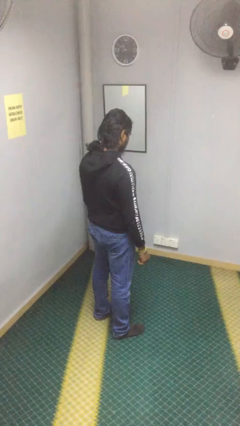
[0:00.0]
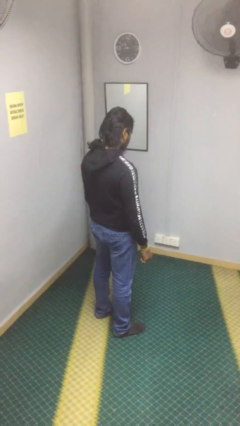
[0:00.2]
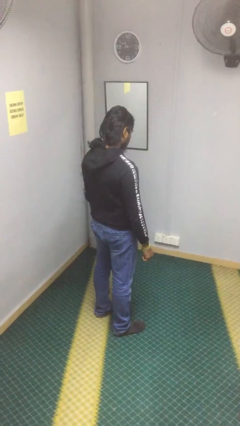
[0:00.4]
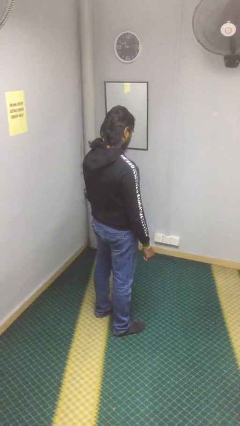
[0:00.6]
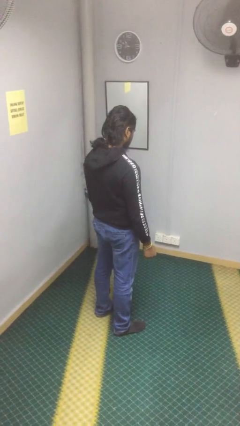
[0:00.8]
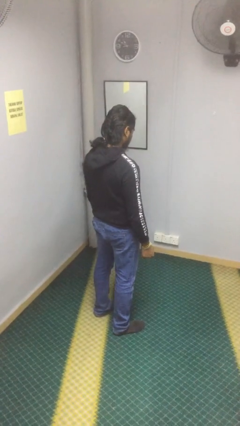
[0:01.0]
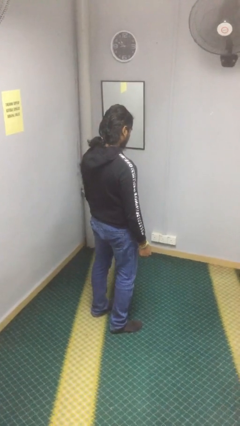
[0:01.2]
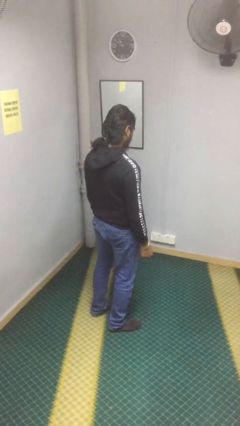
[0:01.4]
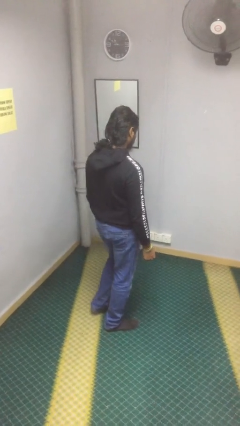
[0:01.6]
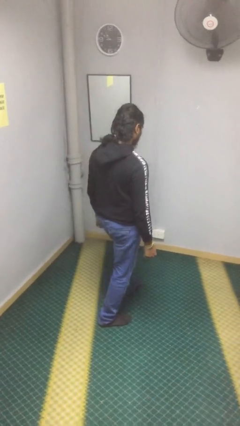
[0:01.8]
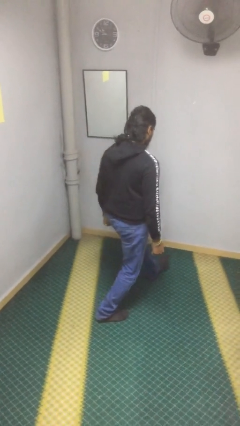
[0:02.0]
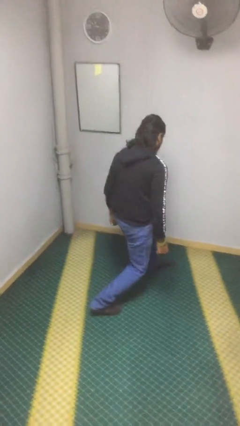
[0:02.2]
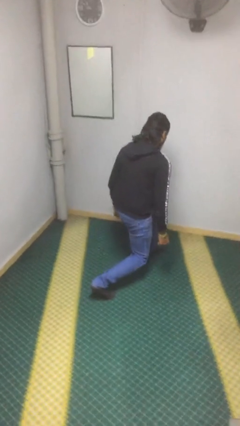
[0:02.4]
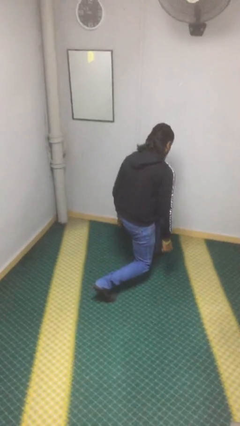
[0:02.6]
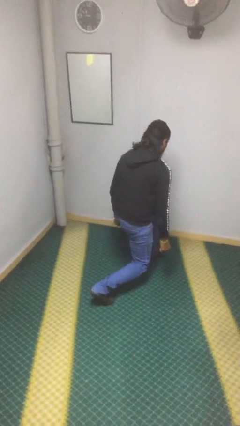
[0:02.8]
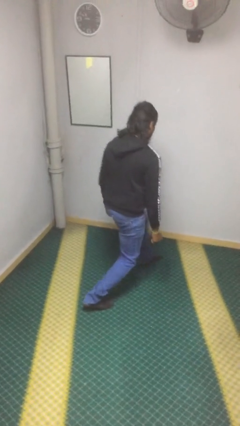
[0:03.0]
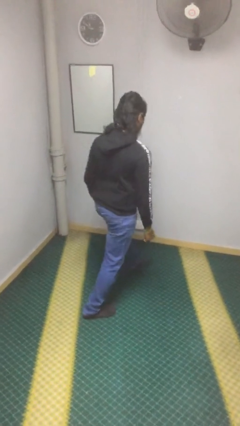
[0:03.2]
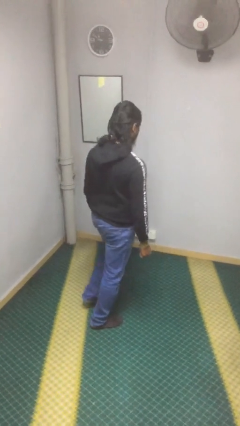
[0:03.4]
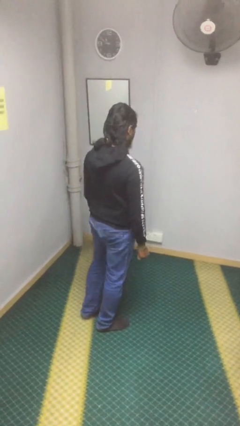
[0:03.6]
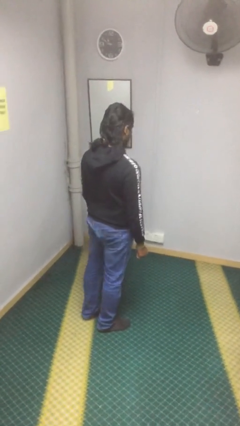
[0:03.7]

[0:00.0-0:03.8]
person exercises with lunges

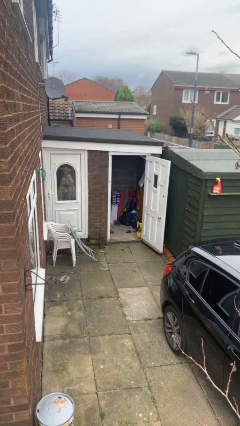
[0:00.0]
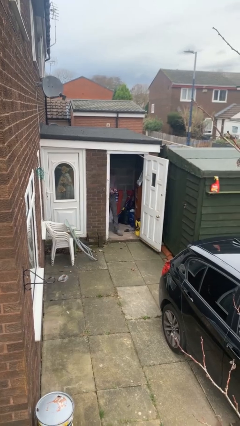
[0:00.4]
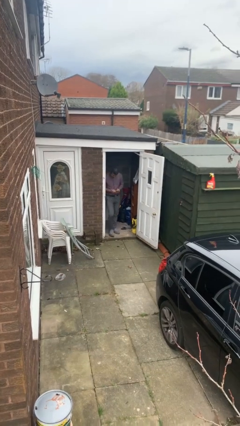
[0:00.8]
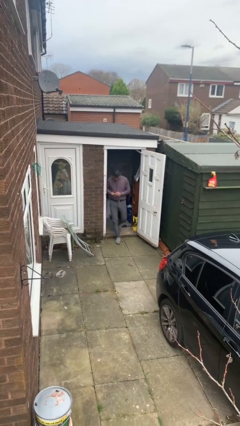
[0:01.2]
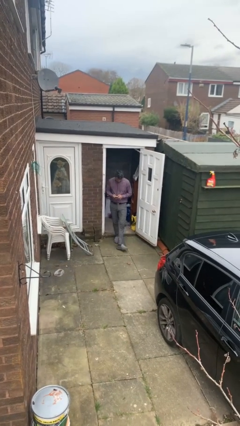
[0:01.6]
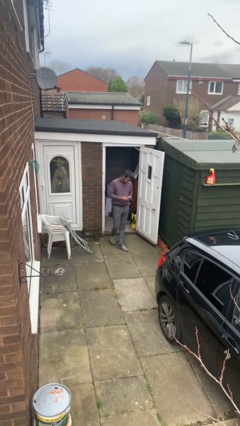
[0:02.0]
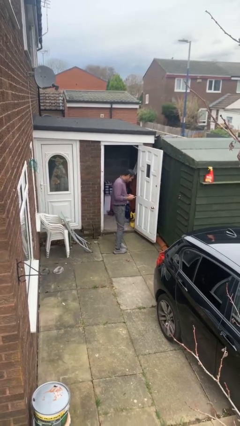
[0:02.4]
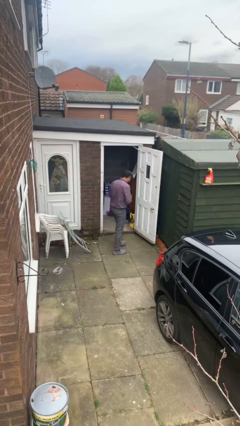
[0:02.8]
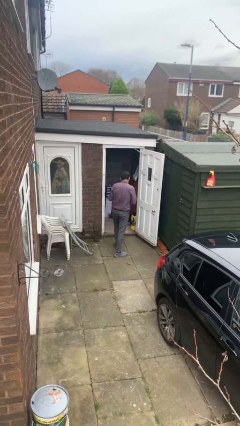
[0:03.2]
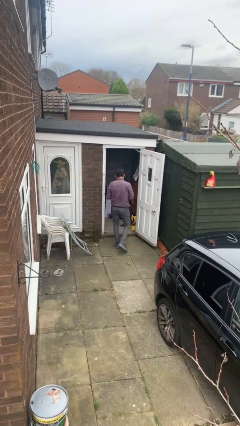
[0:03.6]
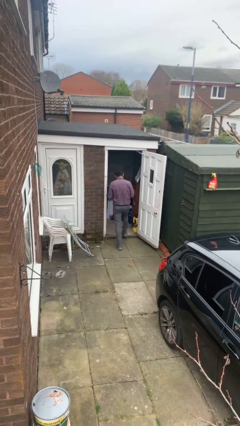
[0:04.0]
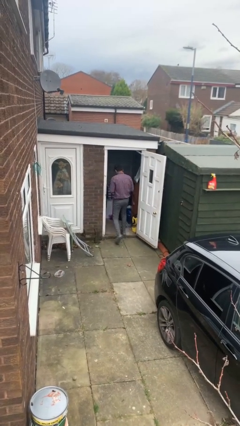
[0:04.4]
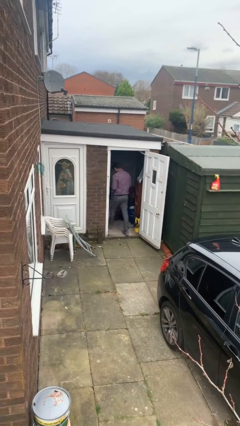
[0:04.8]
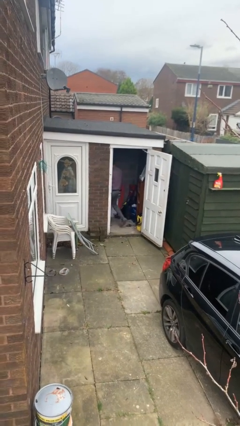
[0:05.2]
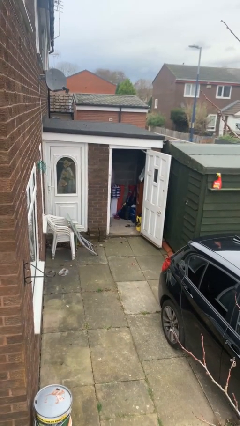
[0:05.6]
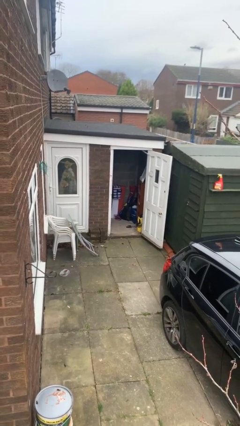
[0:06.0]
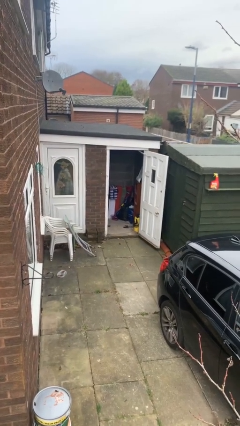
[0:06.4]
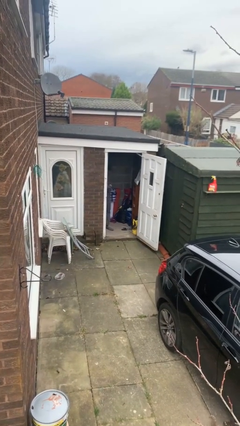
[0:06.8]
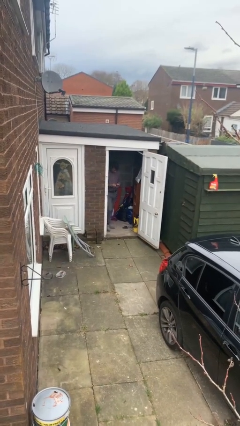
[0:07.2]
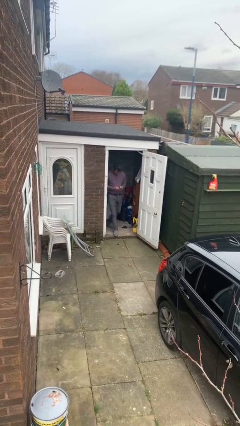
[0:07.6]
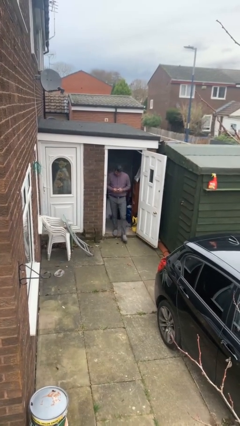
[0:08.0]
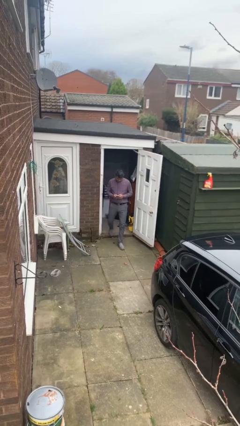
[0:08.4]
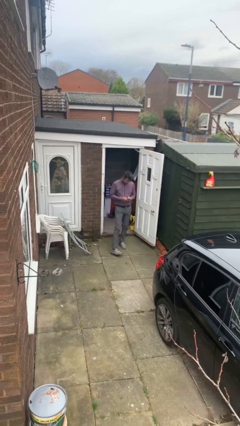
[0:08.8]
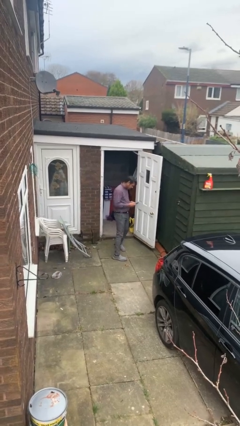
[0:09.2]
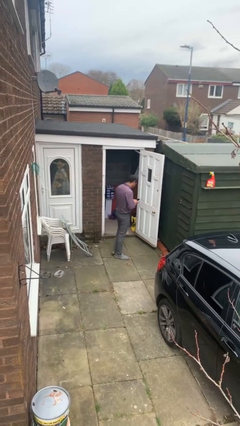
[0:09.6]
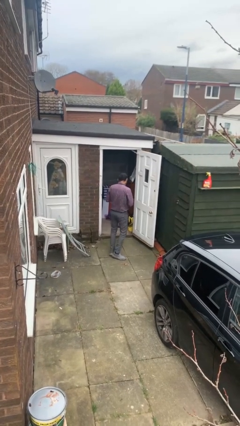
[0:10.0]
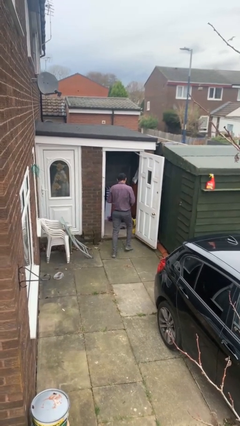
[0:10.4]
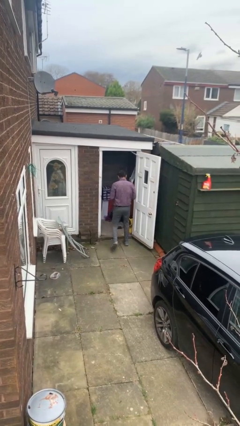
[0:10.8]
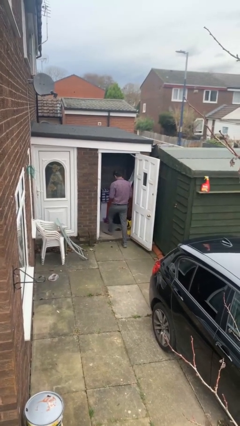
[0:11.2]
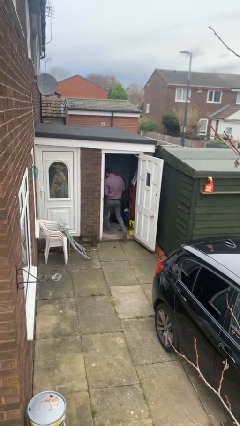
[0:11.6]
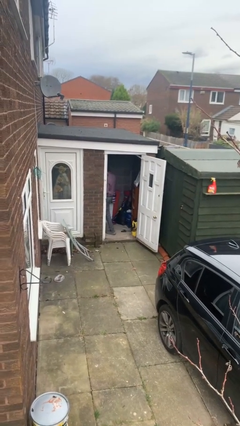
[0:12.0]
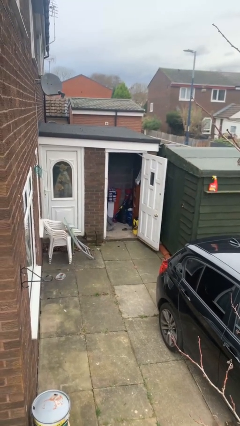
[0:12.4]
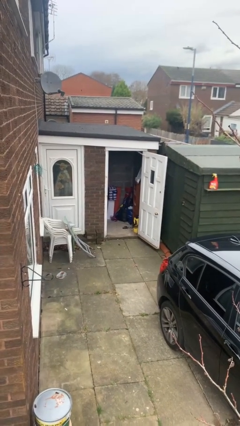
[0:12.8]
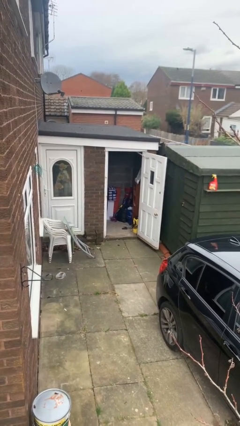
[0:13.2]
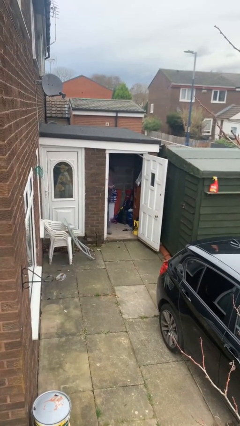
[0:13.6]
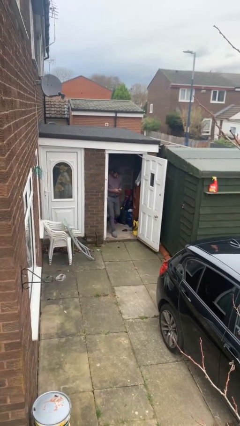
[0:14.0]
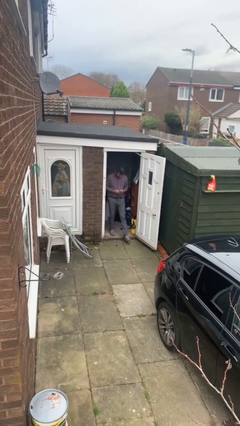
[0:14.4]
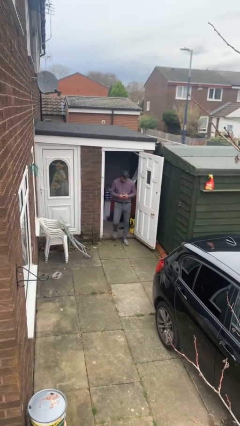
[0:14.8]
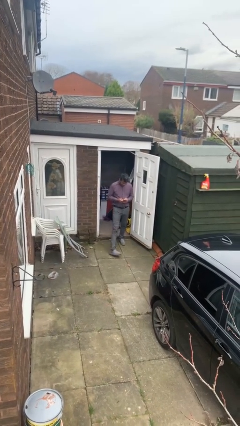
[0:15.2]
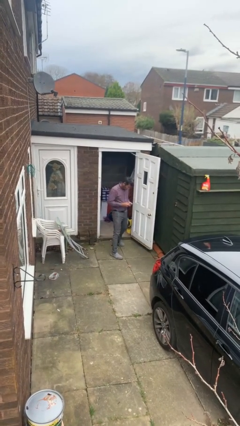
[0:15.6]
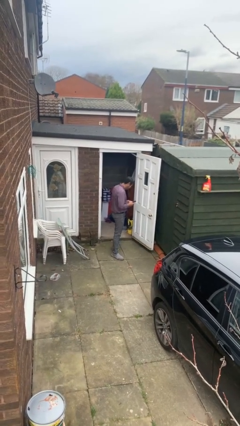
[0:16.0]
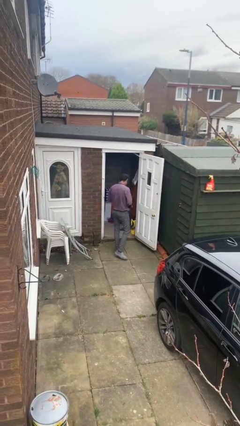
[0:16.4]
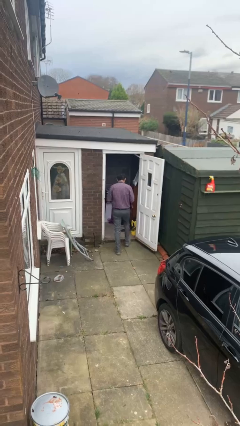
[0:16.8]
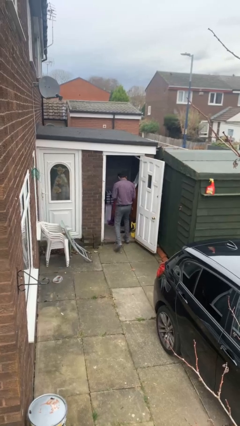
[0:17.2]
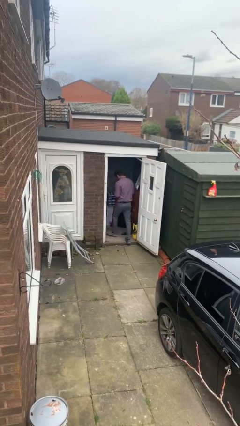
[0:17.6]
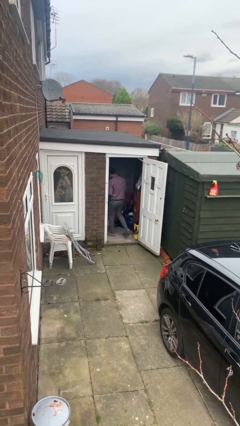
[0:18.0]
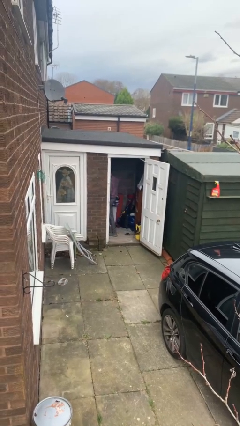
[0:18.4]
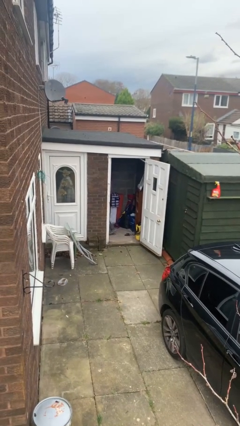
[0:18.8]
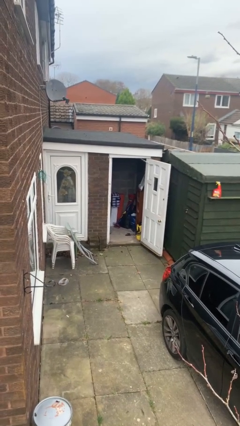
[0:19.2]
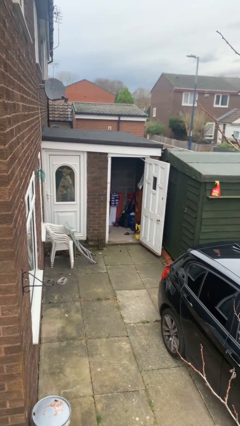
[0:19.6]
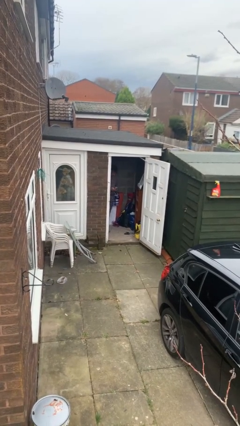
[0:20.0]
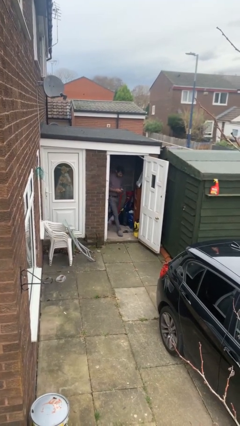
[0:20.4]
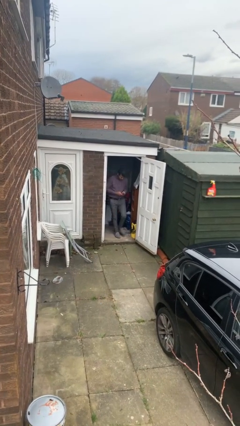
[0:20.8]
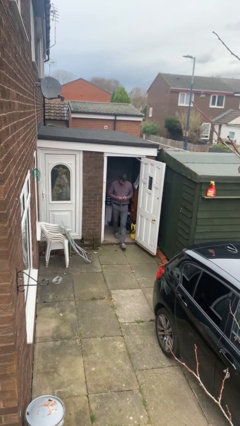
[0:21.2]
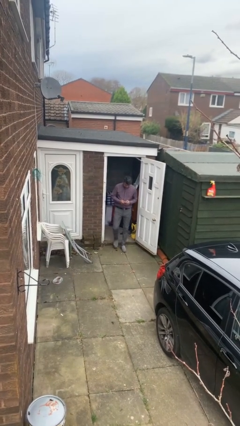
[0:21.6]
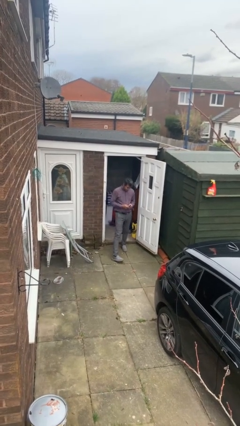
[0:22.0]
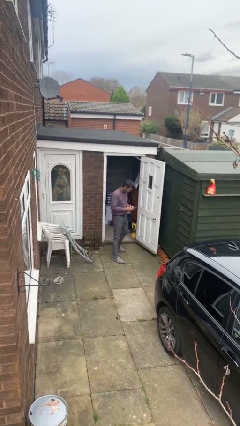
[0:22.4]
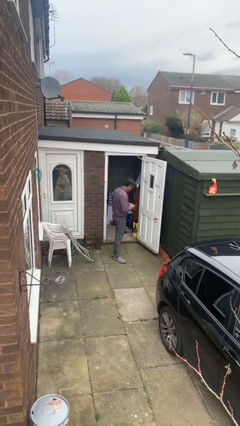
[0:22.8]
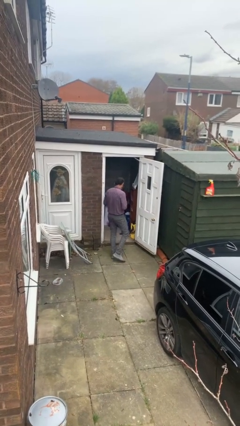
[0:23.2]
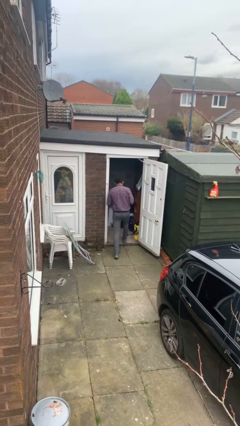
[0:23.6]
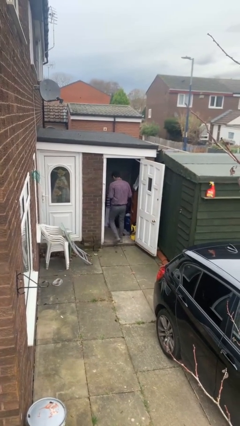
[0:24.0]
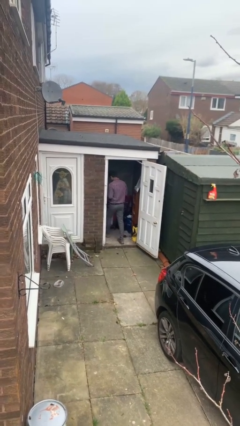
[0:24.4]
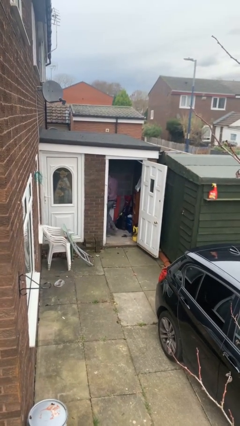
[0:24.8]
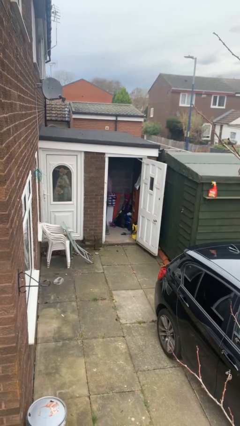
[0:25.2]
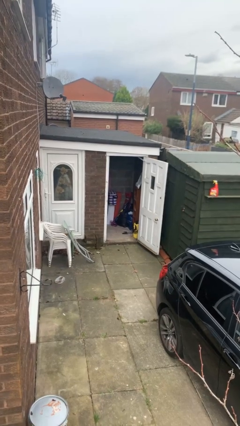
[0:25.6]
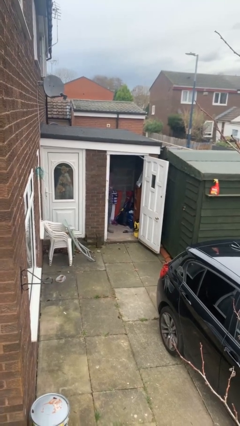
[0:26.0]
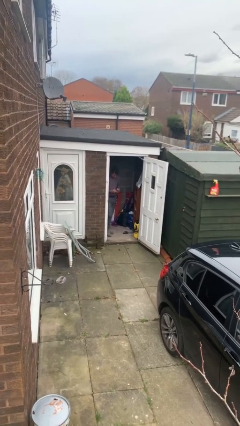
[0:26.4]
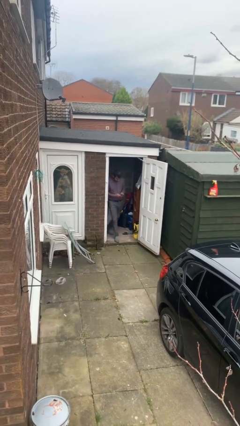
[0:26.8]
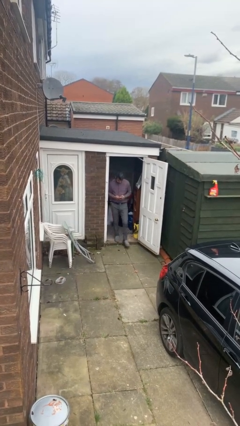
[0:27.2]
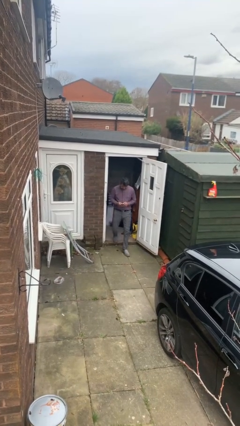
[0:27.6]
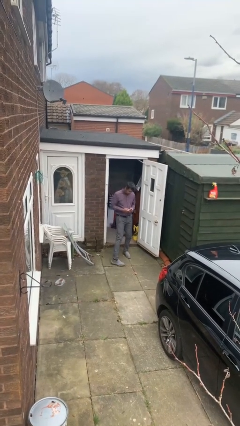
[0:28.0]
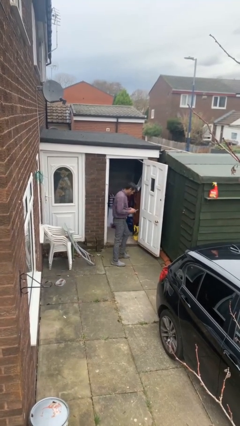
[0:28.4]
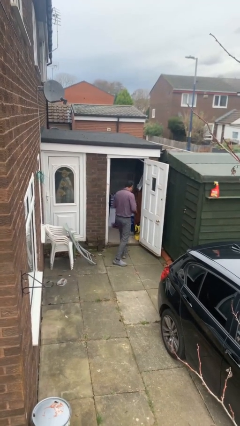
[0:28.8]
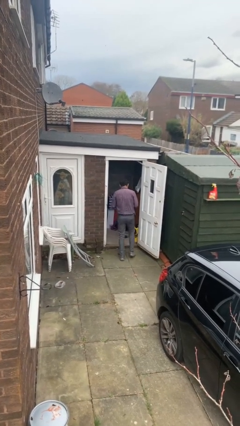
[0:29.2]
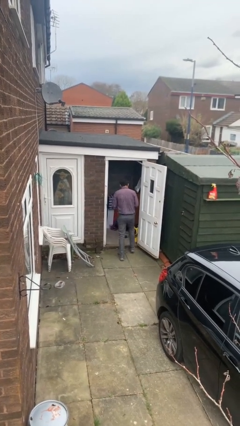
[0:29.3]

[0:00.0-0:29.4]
person texts on phone
